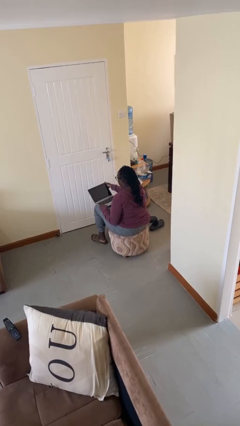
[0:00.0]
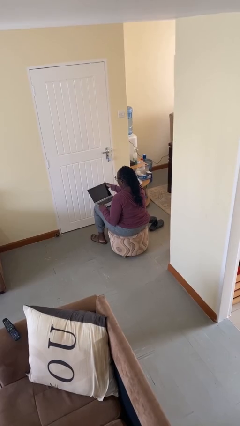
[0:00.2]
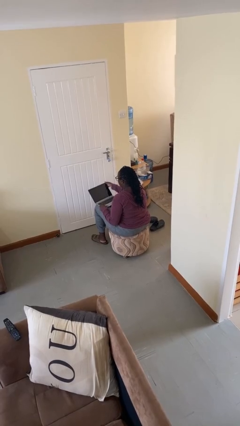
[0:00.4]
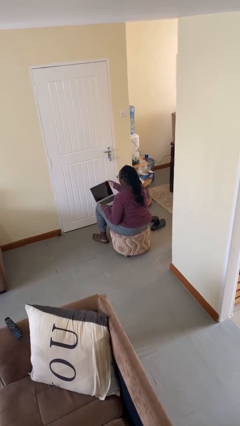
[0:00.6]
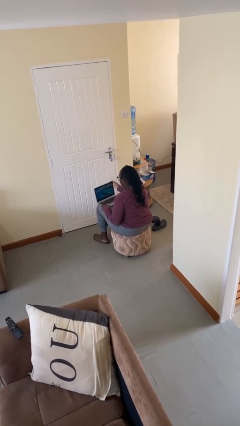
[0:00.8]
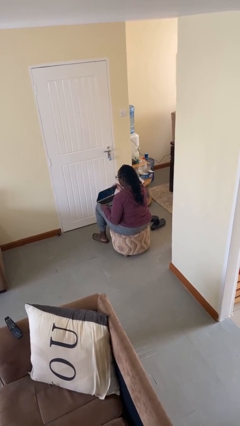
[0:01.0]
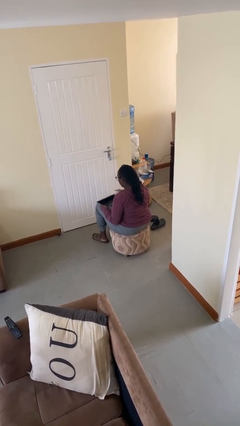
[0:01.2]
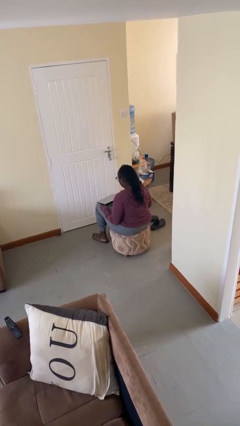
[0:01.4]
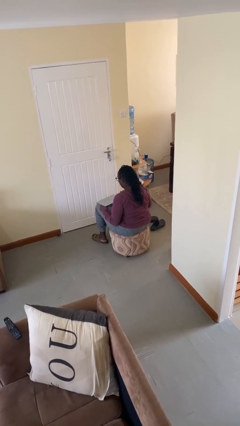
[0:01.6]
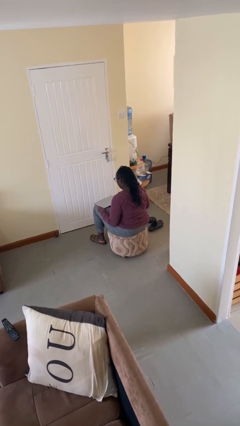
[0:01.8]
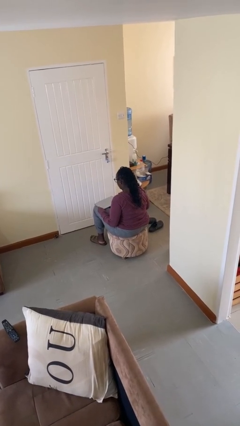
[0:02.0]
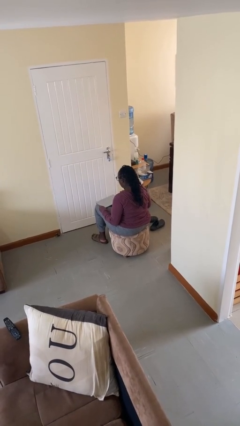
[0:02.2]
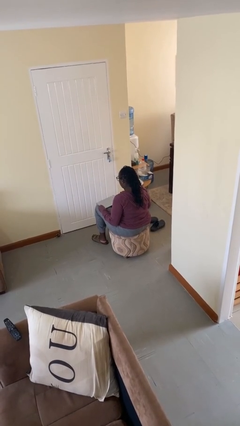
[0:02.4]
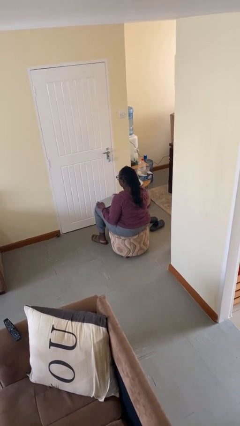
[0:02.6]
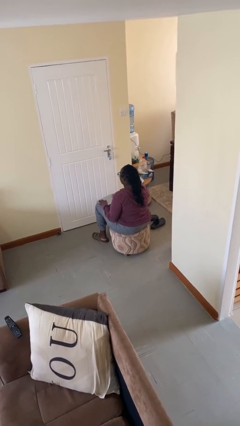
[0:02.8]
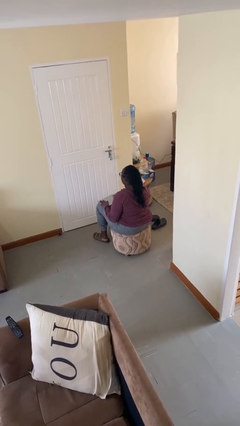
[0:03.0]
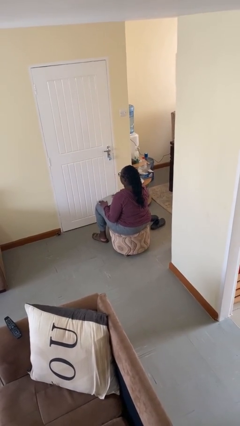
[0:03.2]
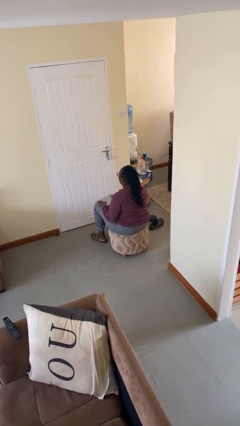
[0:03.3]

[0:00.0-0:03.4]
person closes laptop

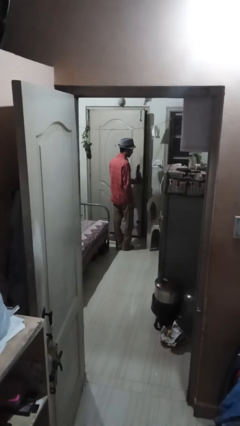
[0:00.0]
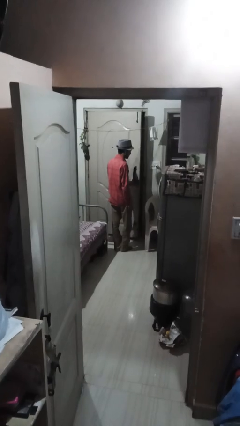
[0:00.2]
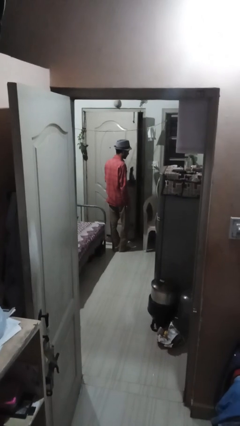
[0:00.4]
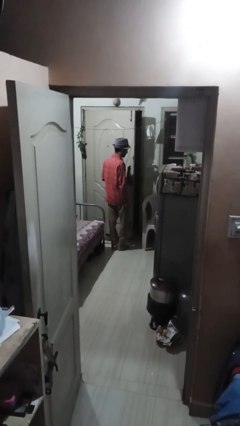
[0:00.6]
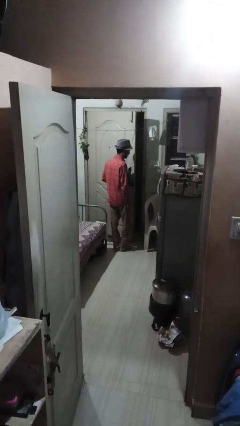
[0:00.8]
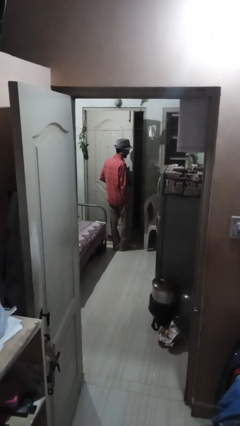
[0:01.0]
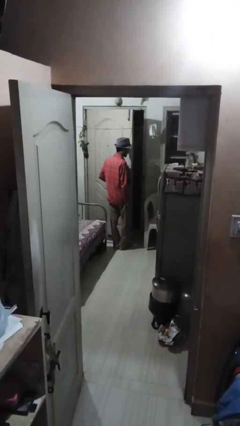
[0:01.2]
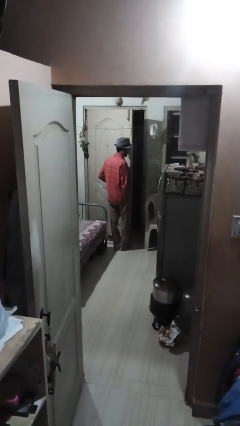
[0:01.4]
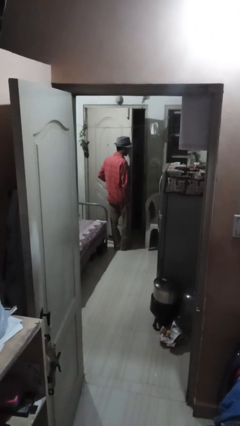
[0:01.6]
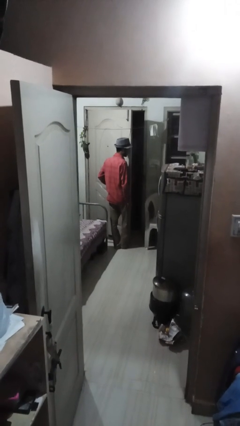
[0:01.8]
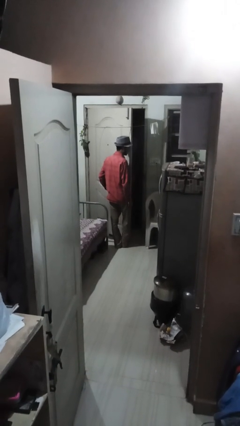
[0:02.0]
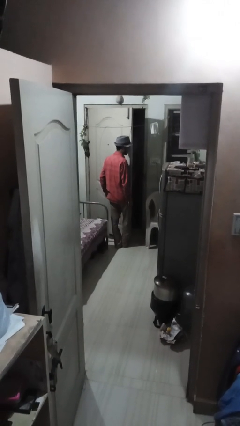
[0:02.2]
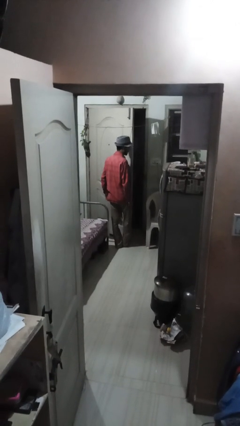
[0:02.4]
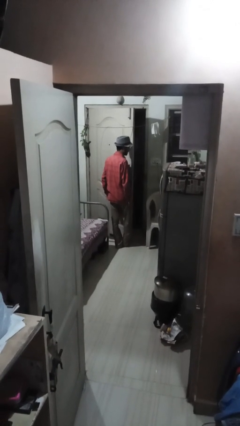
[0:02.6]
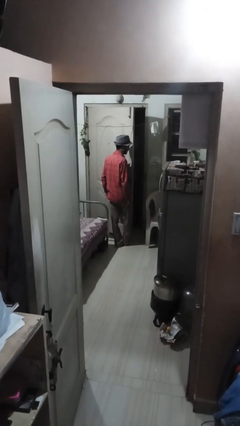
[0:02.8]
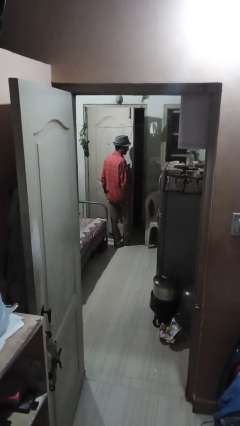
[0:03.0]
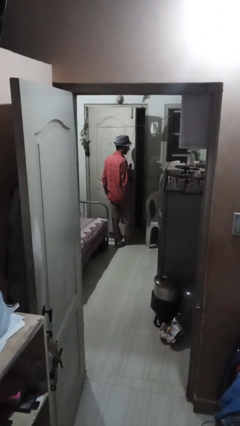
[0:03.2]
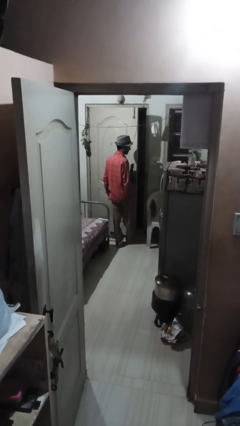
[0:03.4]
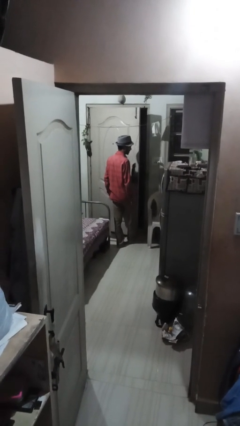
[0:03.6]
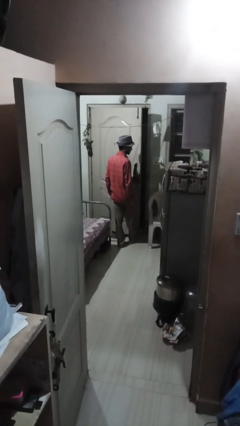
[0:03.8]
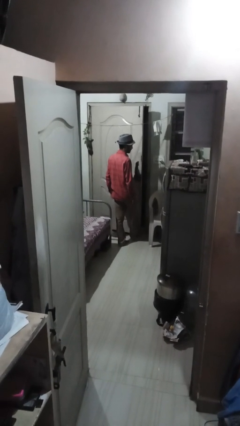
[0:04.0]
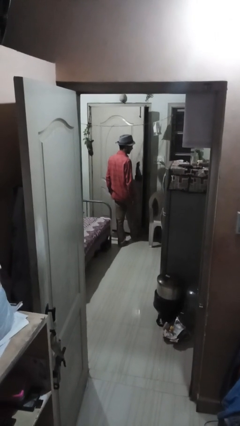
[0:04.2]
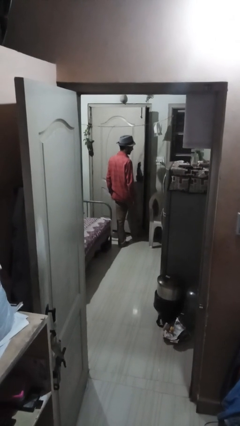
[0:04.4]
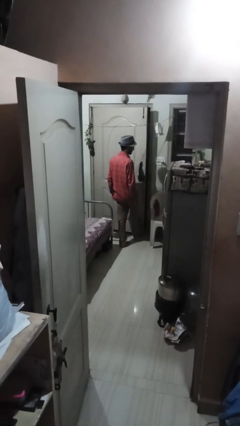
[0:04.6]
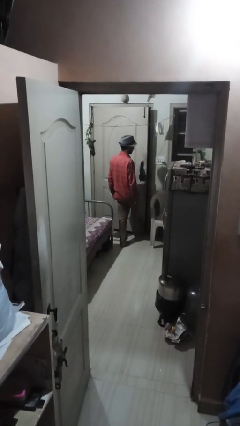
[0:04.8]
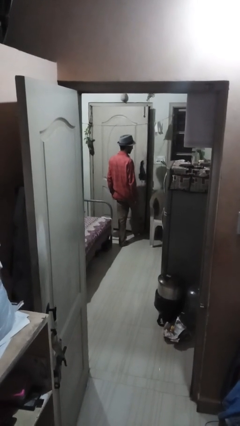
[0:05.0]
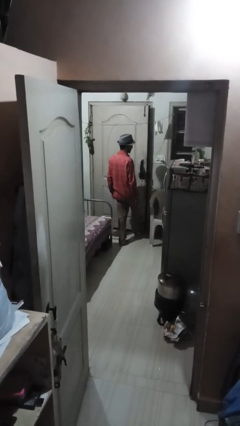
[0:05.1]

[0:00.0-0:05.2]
person opens facility door

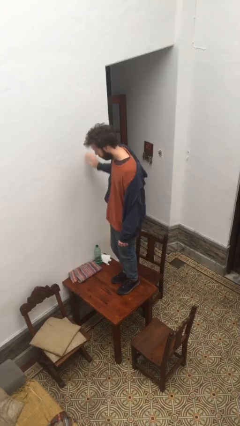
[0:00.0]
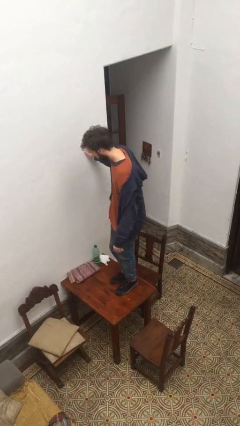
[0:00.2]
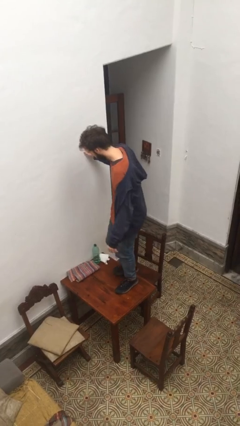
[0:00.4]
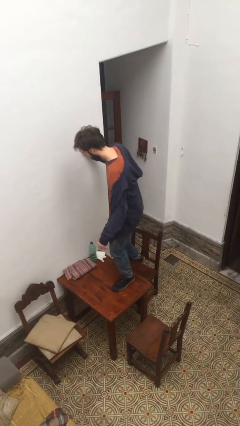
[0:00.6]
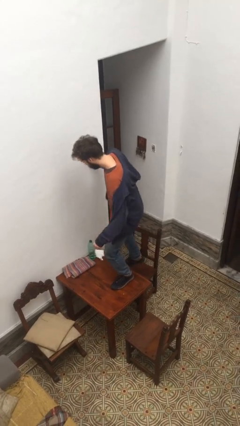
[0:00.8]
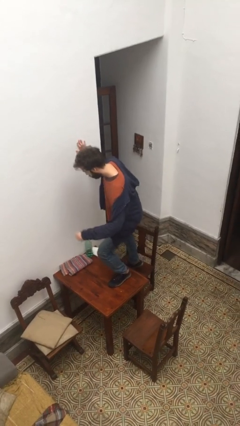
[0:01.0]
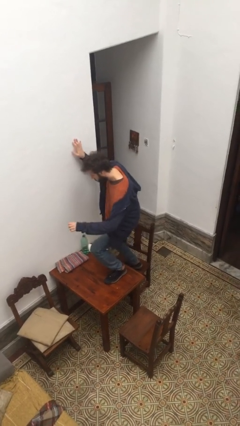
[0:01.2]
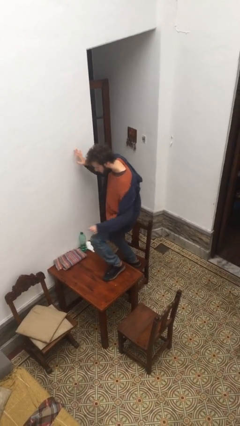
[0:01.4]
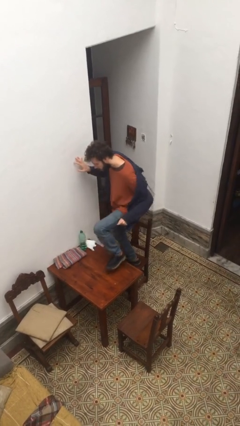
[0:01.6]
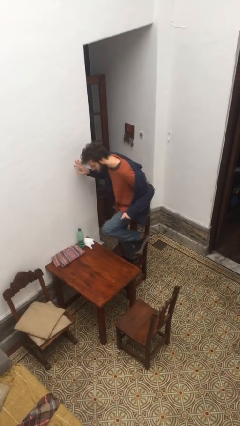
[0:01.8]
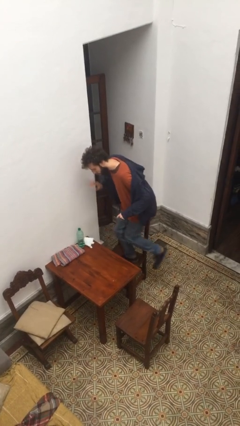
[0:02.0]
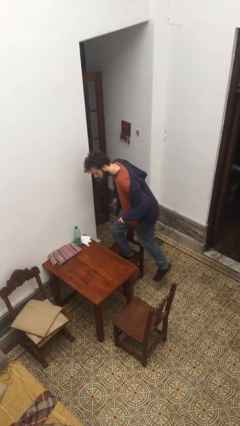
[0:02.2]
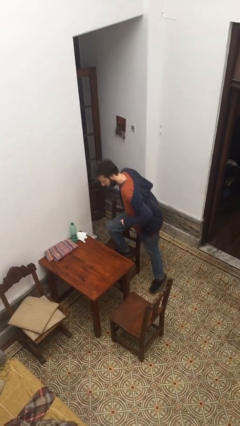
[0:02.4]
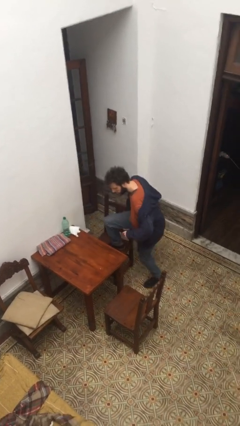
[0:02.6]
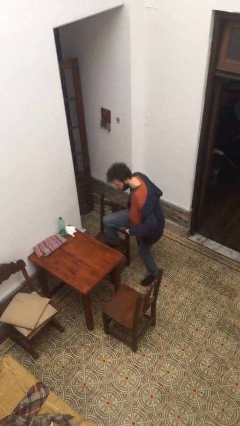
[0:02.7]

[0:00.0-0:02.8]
person climbs off table

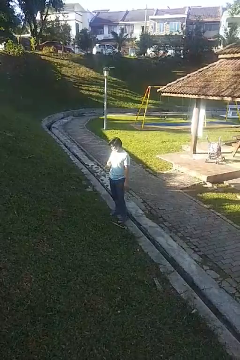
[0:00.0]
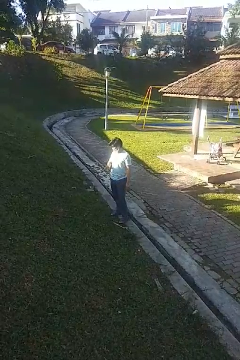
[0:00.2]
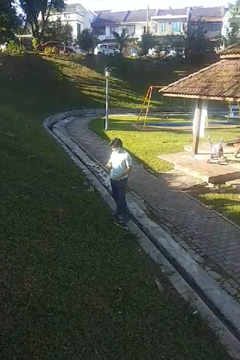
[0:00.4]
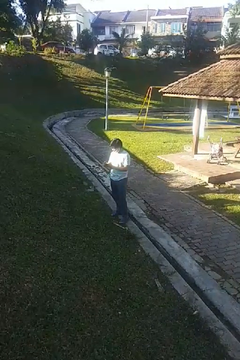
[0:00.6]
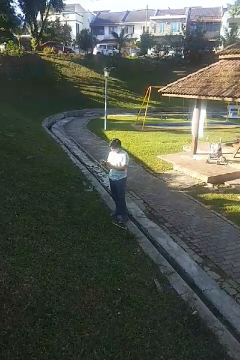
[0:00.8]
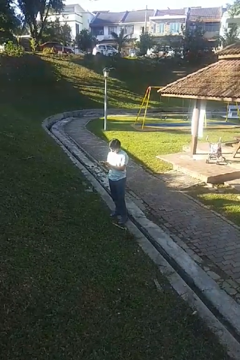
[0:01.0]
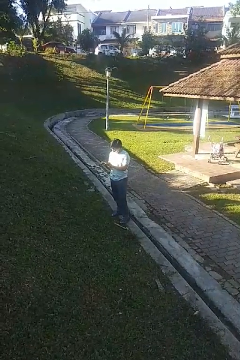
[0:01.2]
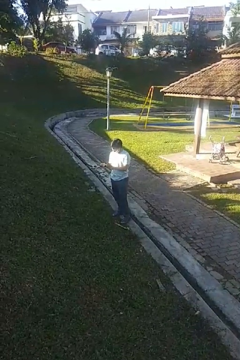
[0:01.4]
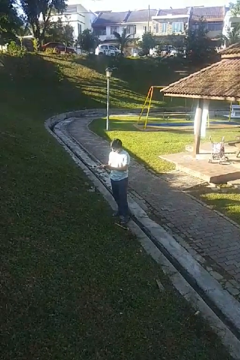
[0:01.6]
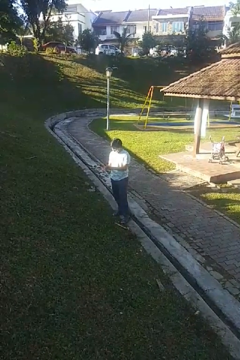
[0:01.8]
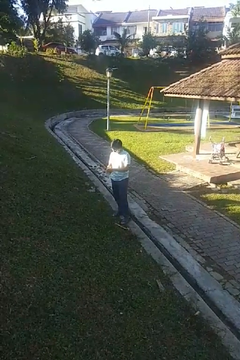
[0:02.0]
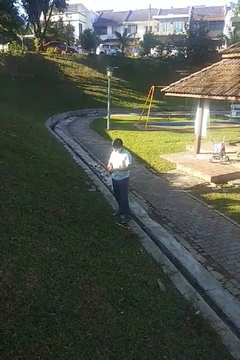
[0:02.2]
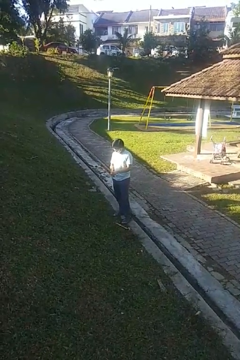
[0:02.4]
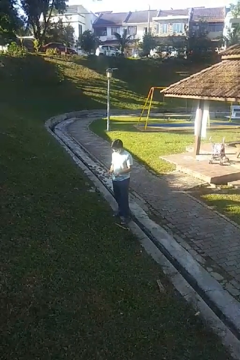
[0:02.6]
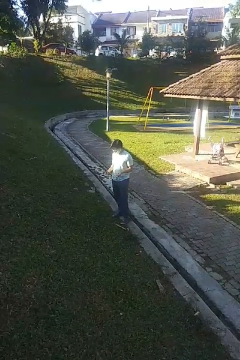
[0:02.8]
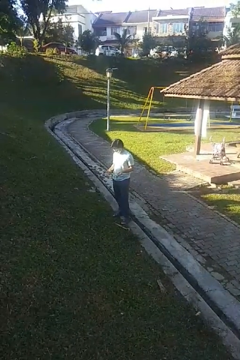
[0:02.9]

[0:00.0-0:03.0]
person takes off wristwatch

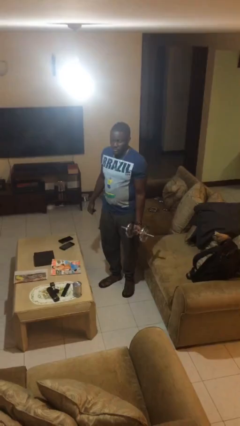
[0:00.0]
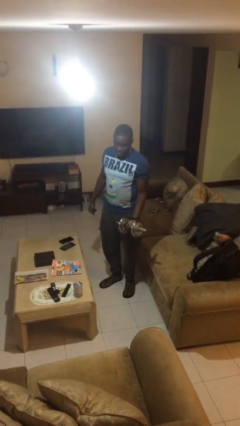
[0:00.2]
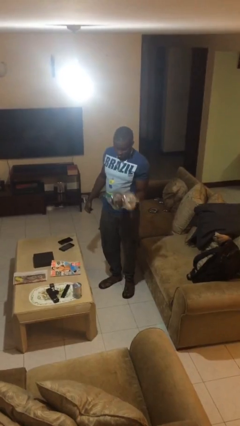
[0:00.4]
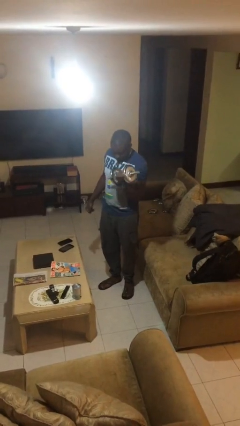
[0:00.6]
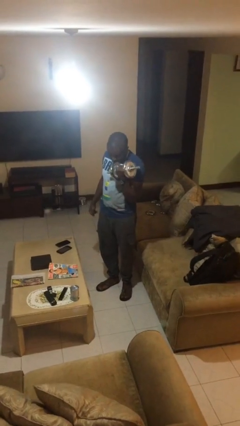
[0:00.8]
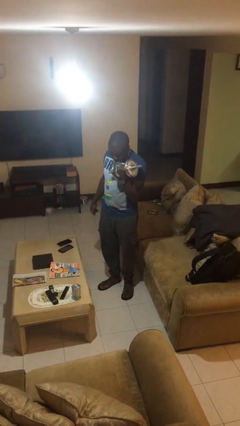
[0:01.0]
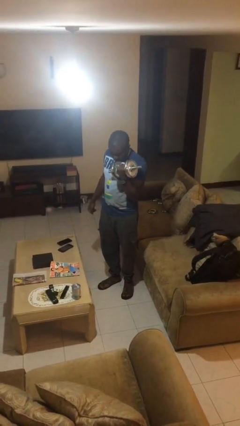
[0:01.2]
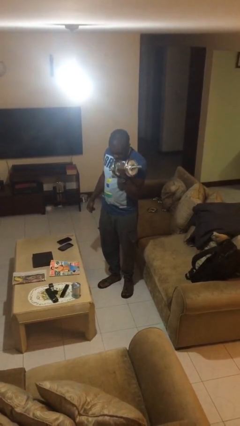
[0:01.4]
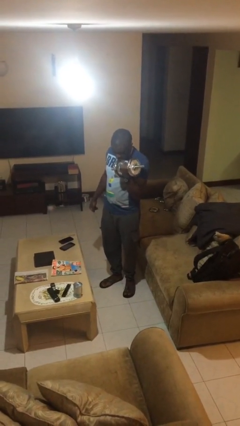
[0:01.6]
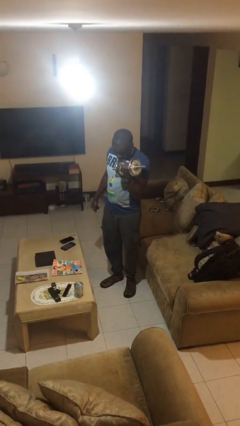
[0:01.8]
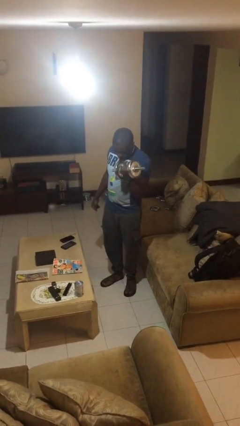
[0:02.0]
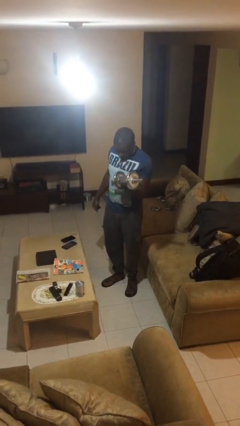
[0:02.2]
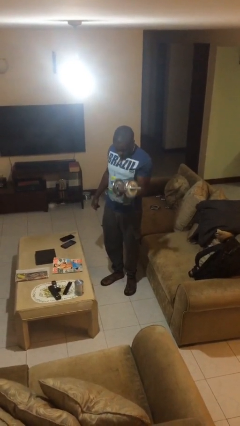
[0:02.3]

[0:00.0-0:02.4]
person lifts dumbbells

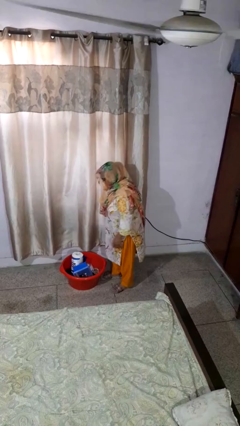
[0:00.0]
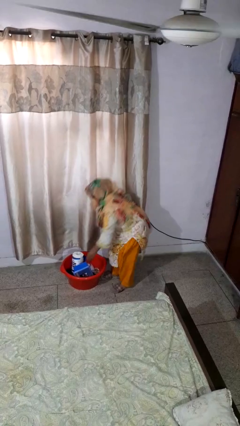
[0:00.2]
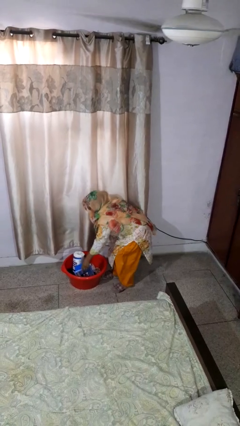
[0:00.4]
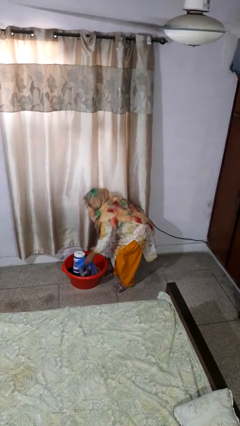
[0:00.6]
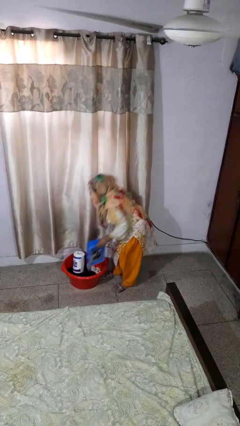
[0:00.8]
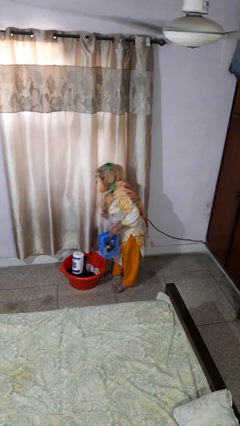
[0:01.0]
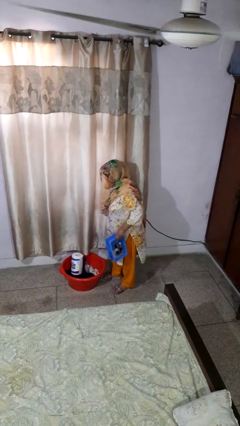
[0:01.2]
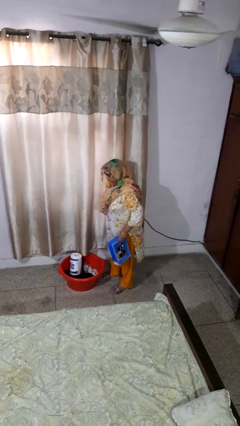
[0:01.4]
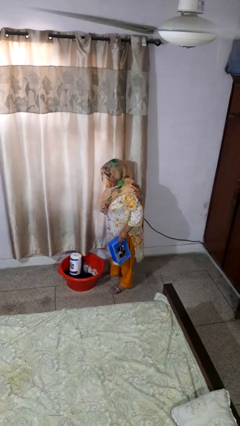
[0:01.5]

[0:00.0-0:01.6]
person takes object from basket
